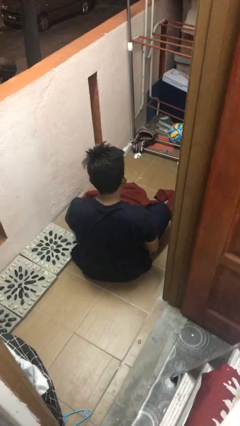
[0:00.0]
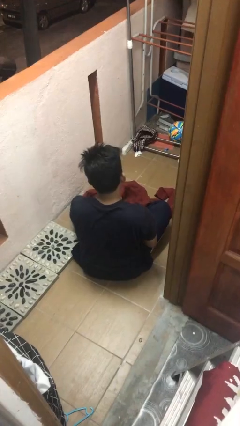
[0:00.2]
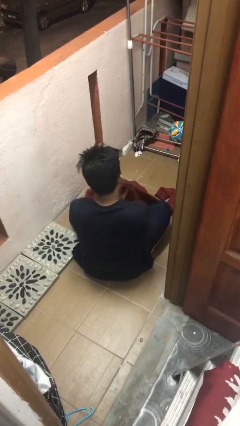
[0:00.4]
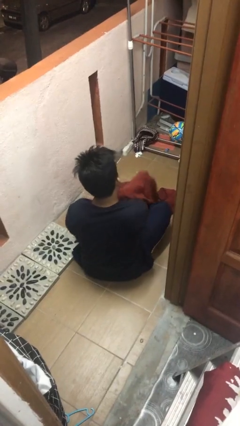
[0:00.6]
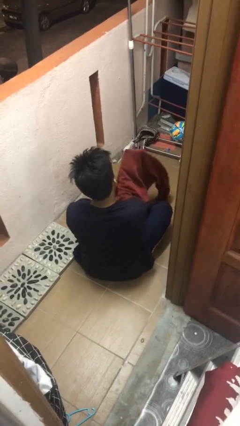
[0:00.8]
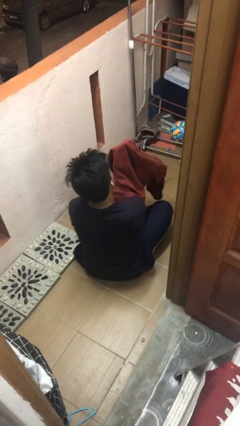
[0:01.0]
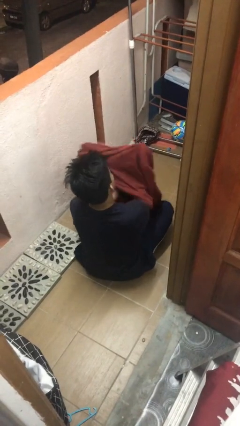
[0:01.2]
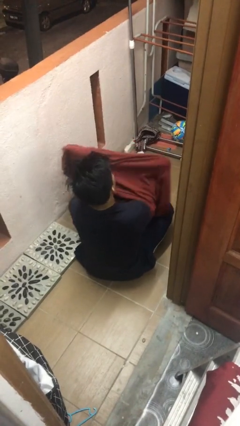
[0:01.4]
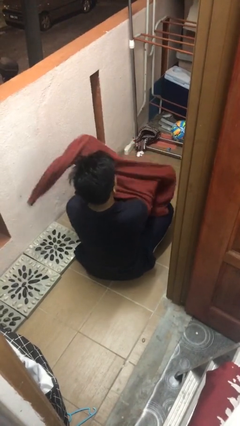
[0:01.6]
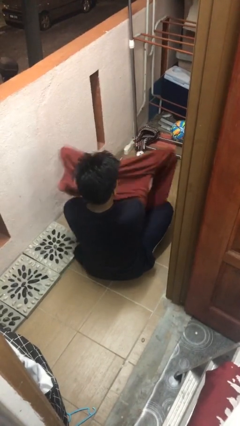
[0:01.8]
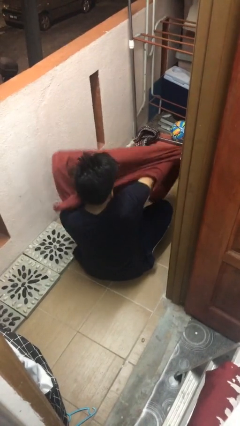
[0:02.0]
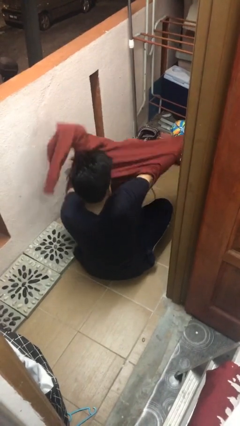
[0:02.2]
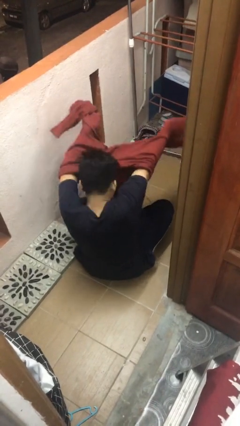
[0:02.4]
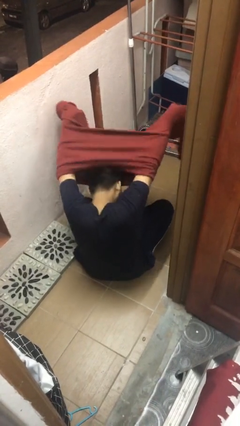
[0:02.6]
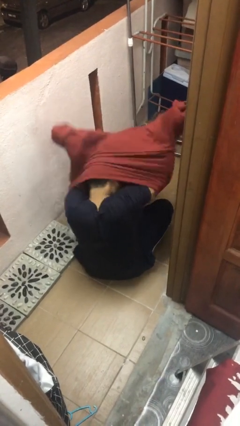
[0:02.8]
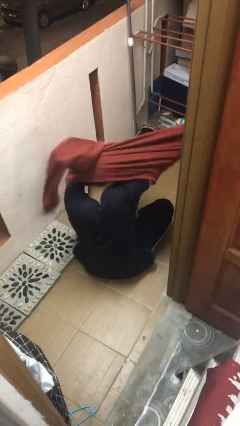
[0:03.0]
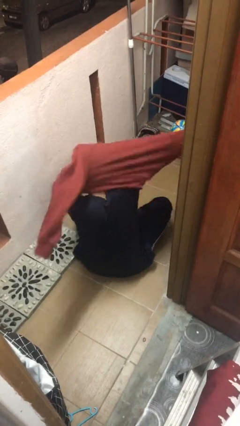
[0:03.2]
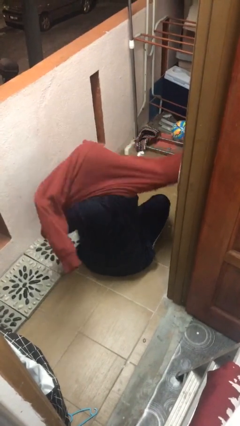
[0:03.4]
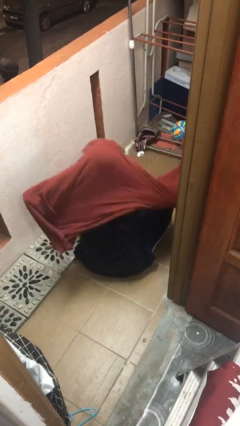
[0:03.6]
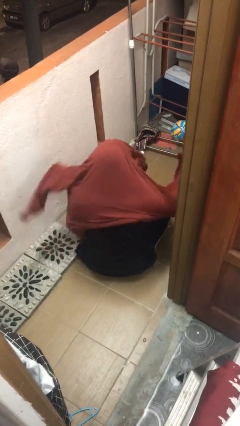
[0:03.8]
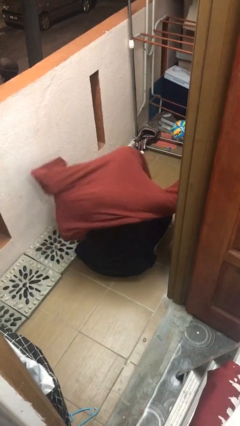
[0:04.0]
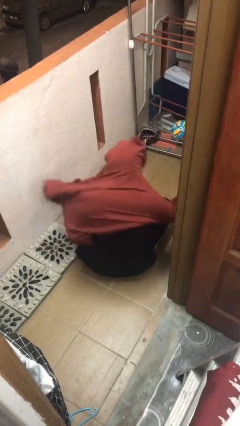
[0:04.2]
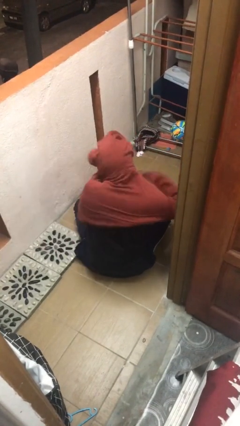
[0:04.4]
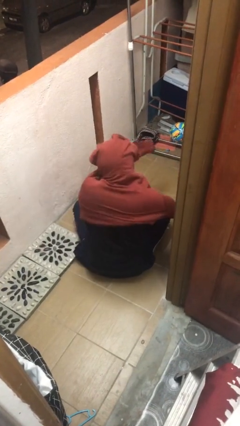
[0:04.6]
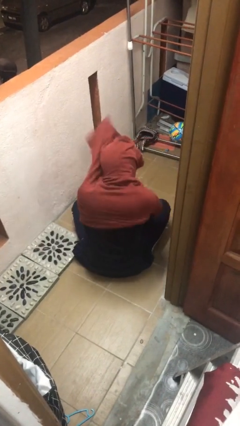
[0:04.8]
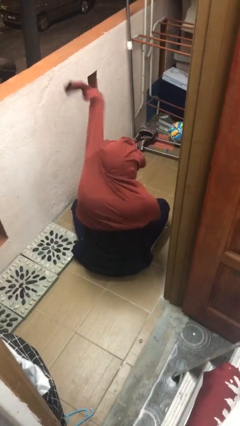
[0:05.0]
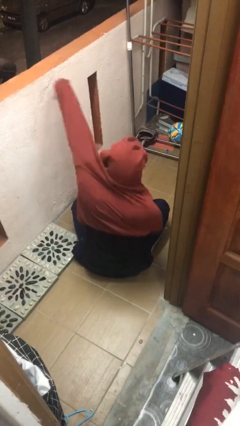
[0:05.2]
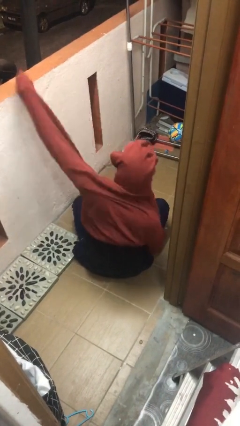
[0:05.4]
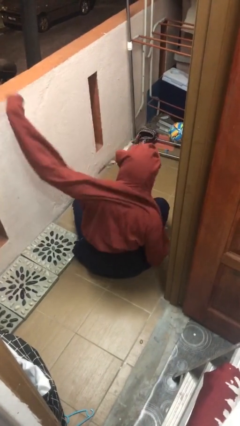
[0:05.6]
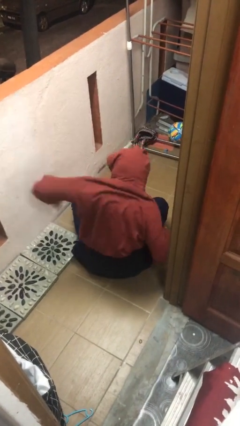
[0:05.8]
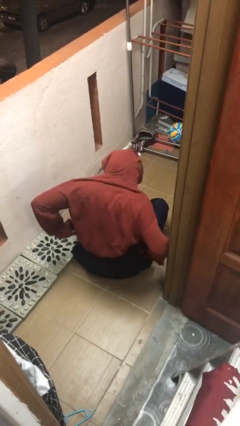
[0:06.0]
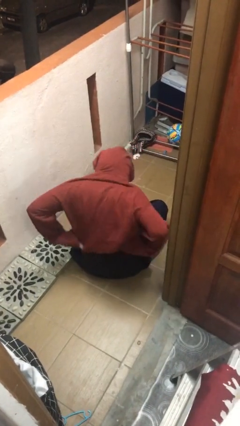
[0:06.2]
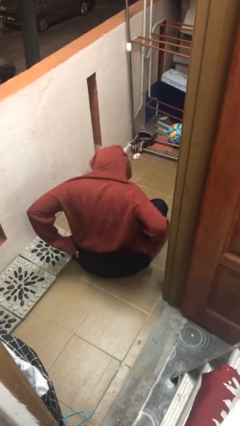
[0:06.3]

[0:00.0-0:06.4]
person puts on hoodie

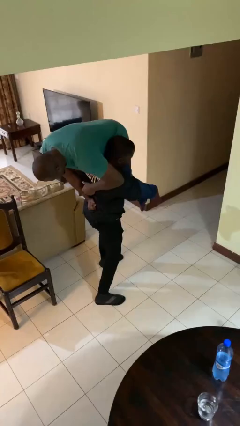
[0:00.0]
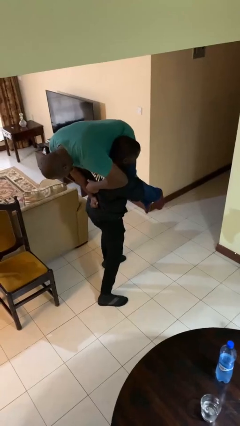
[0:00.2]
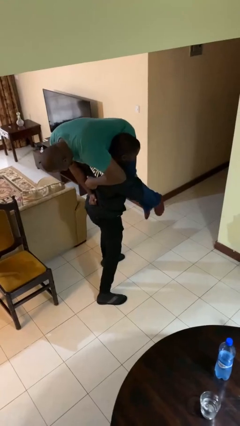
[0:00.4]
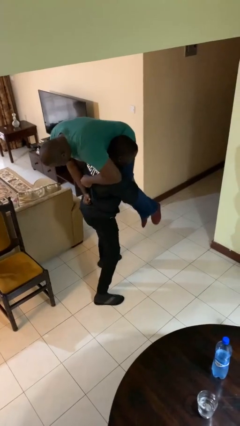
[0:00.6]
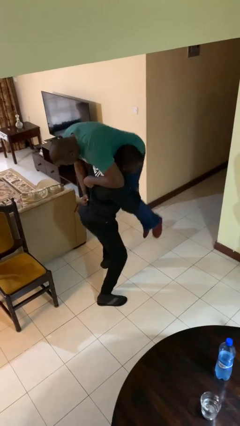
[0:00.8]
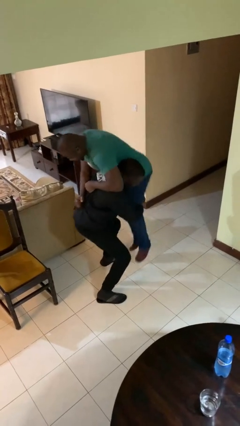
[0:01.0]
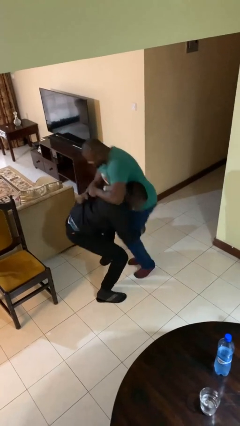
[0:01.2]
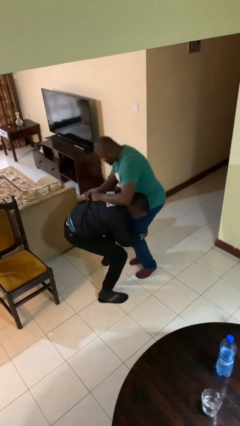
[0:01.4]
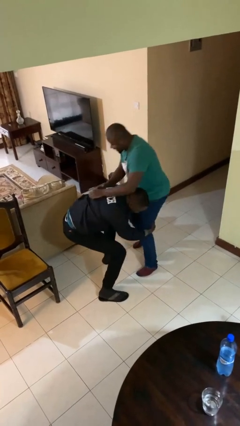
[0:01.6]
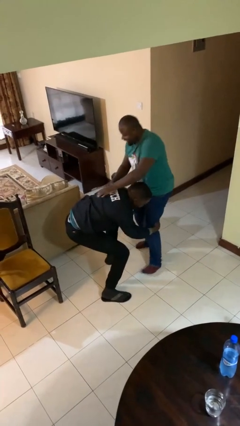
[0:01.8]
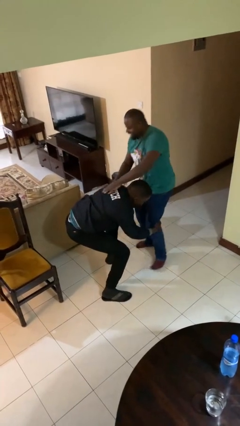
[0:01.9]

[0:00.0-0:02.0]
person puts down person

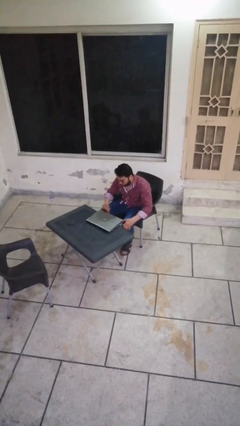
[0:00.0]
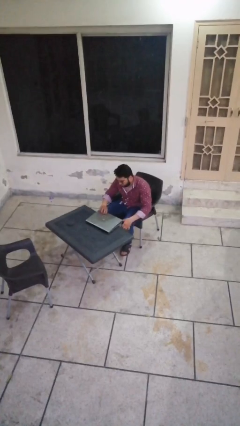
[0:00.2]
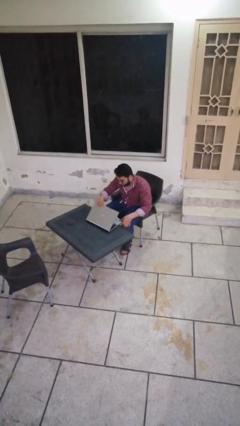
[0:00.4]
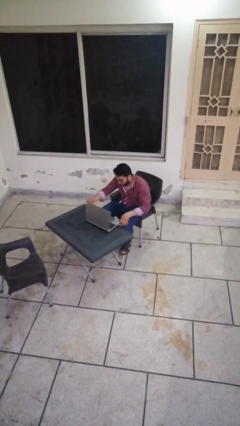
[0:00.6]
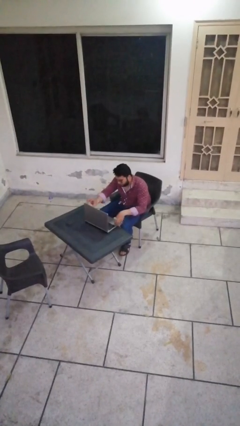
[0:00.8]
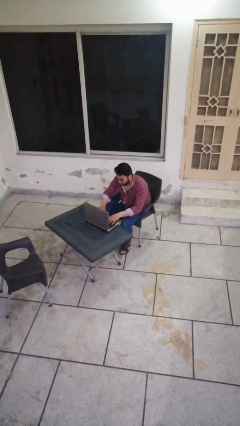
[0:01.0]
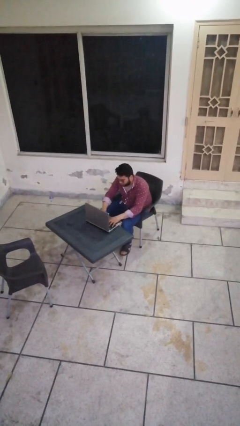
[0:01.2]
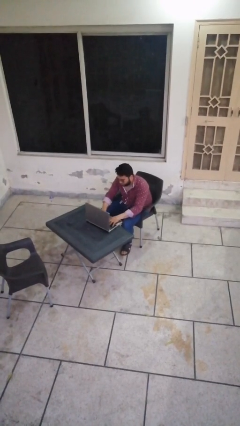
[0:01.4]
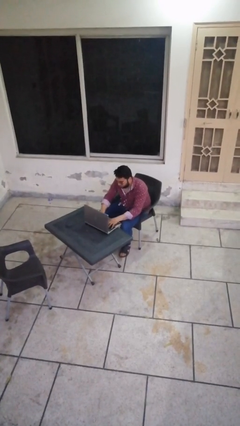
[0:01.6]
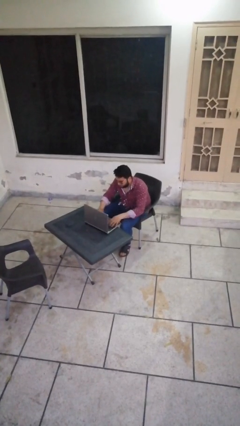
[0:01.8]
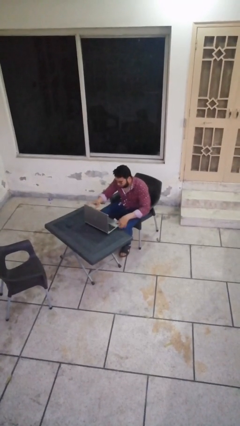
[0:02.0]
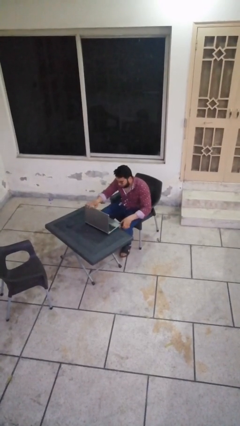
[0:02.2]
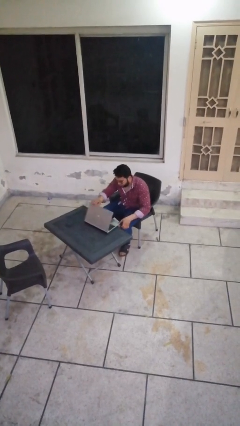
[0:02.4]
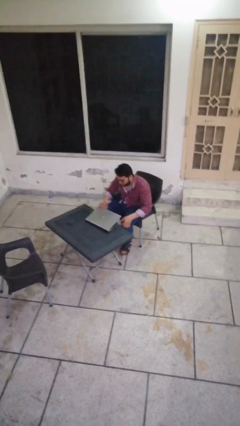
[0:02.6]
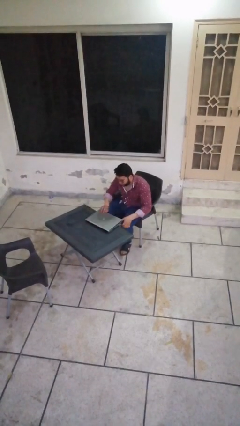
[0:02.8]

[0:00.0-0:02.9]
person interacts with laptop

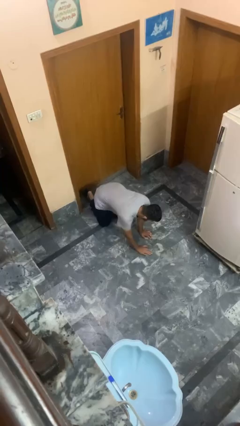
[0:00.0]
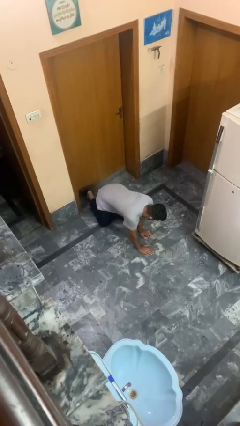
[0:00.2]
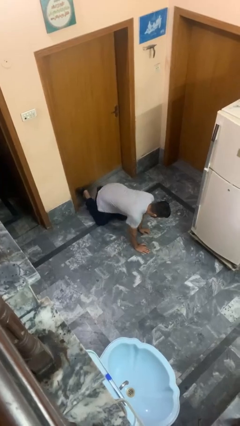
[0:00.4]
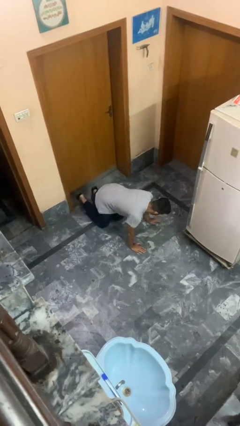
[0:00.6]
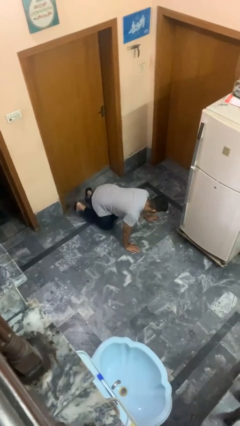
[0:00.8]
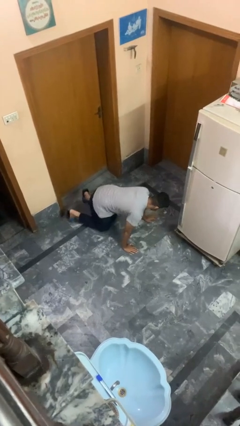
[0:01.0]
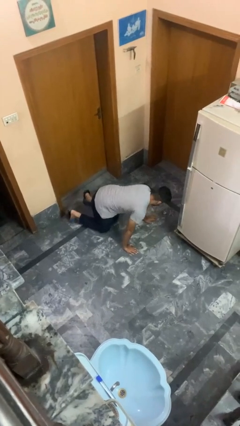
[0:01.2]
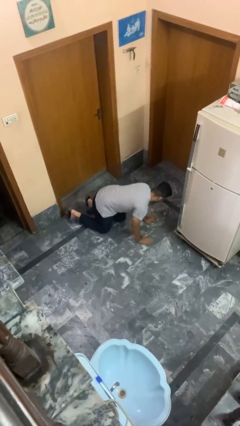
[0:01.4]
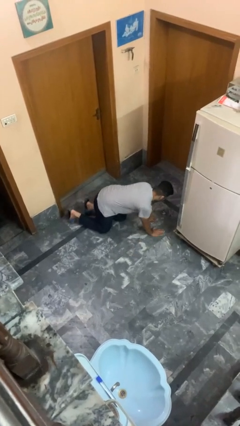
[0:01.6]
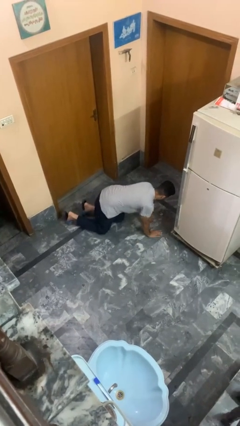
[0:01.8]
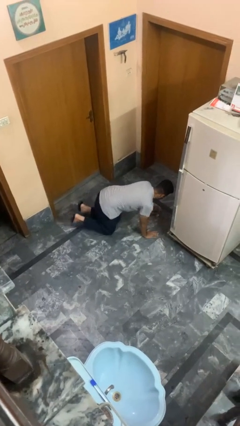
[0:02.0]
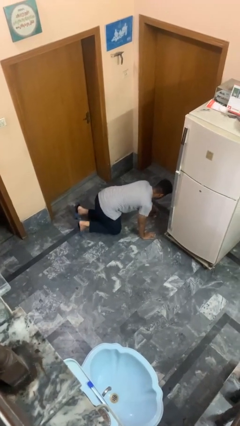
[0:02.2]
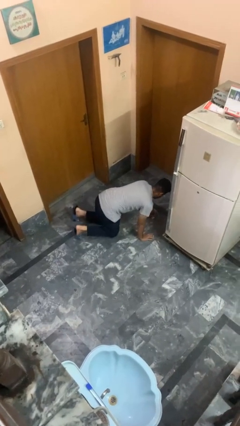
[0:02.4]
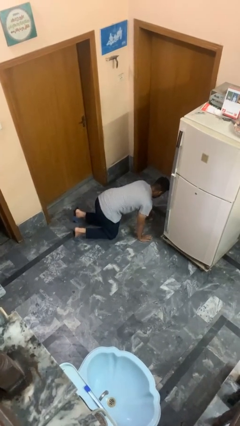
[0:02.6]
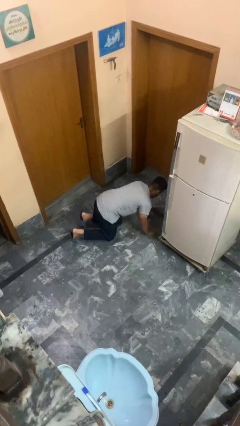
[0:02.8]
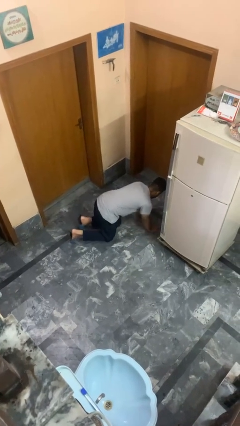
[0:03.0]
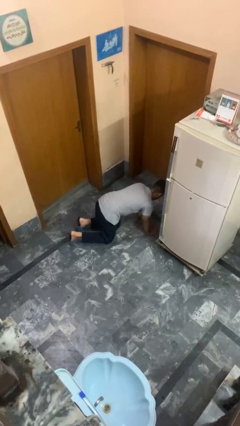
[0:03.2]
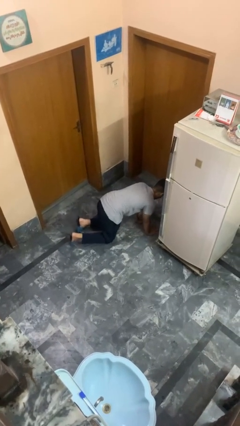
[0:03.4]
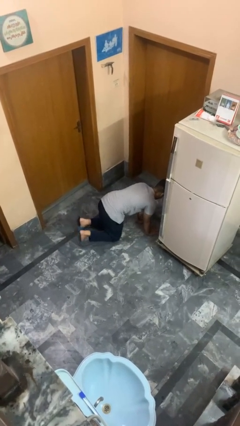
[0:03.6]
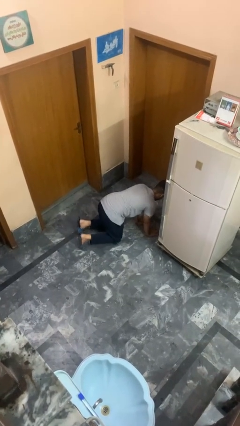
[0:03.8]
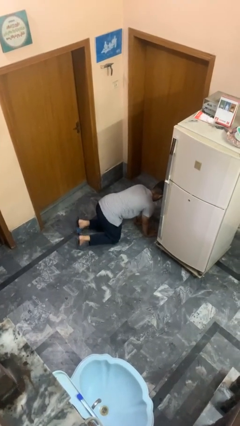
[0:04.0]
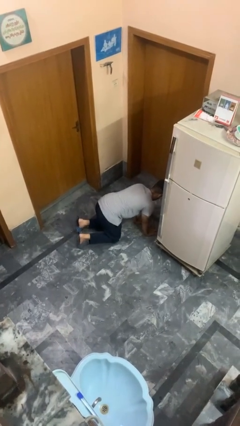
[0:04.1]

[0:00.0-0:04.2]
person crawls

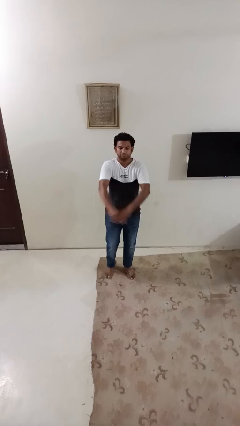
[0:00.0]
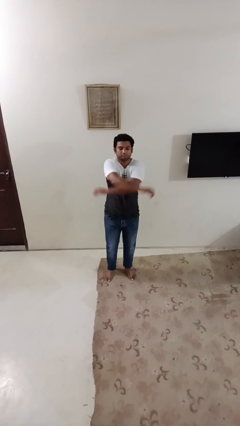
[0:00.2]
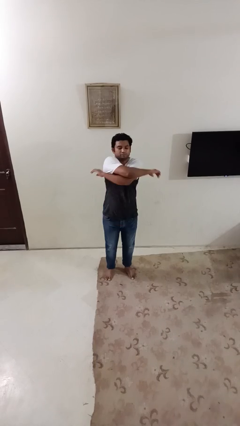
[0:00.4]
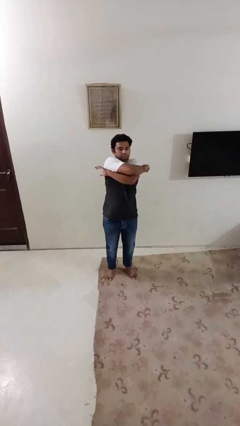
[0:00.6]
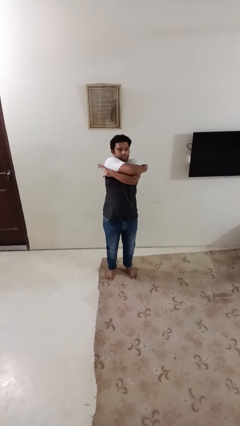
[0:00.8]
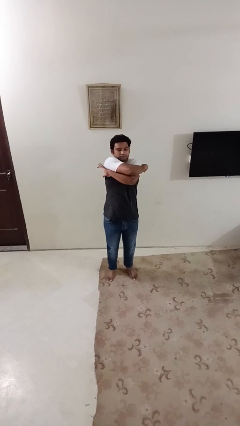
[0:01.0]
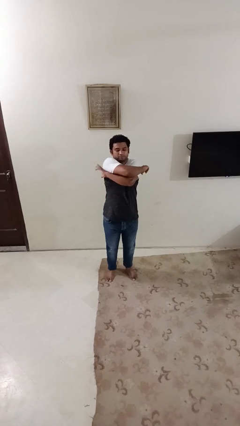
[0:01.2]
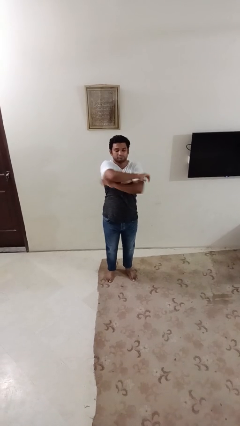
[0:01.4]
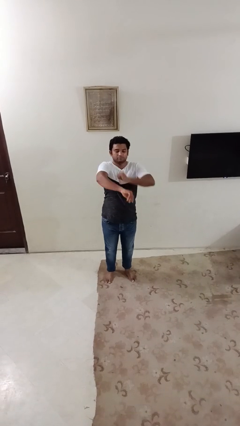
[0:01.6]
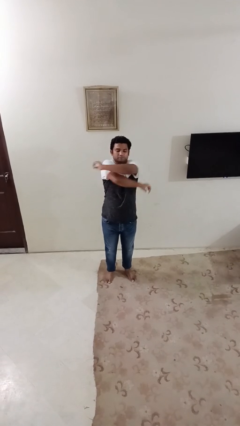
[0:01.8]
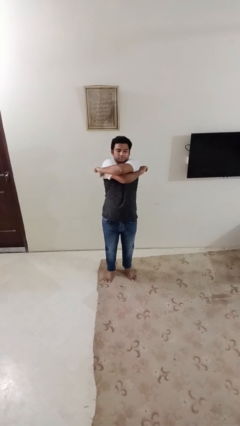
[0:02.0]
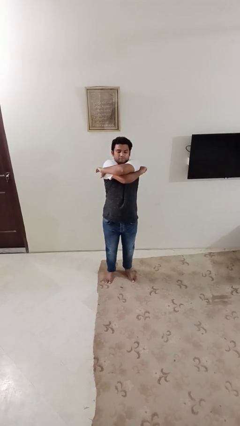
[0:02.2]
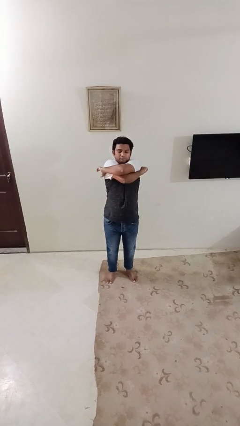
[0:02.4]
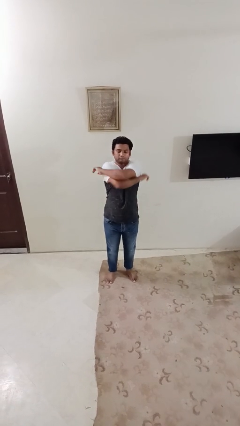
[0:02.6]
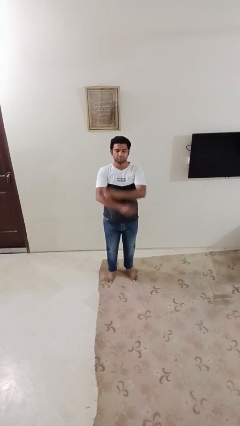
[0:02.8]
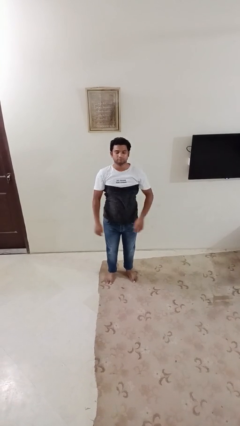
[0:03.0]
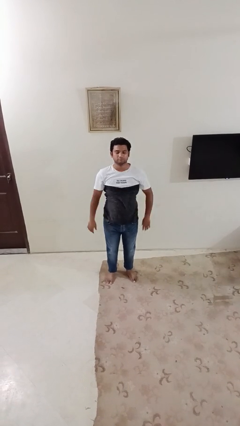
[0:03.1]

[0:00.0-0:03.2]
person stretches arms to side
